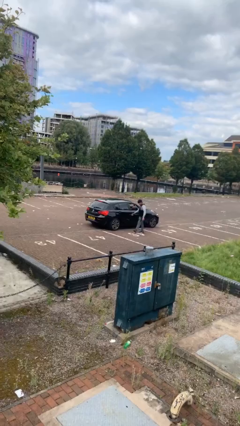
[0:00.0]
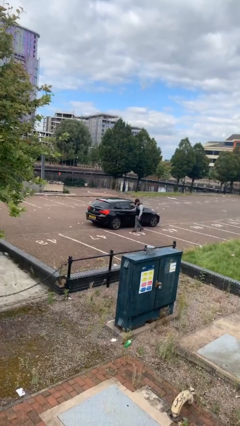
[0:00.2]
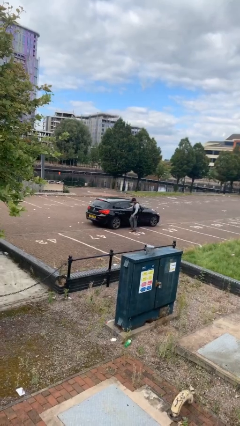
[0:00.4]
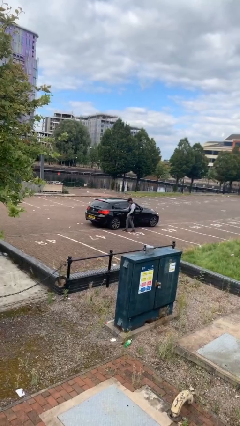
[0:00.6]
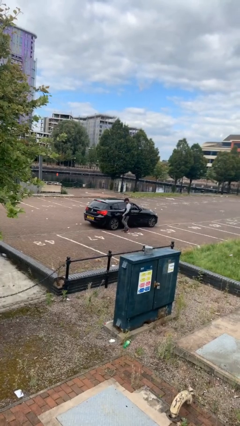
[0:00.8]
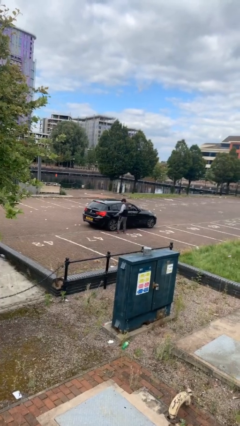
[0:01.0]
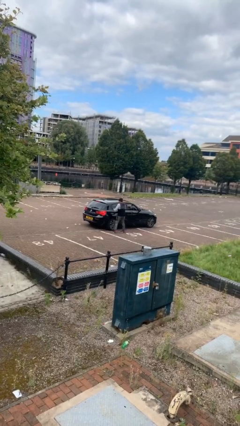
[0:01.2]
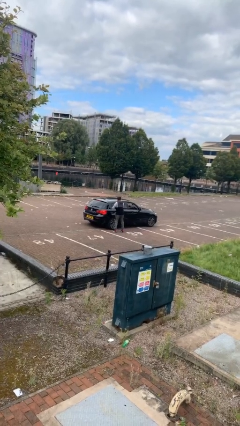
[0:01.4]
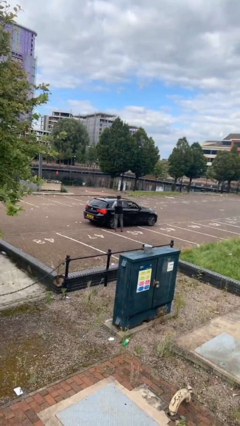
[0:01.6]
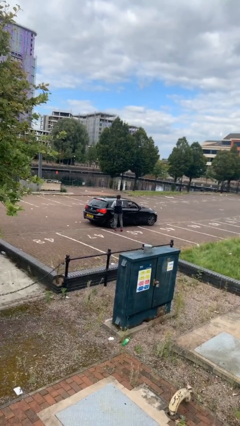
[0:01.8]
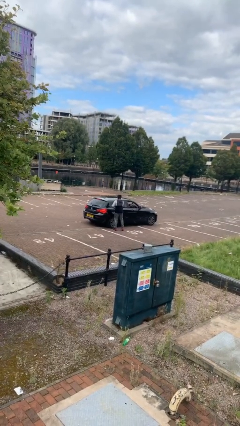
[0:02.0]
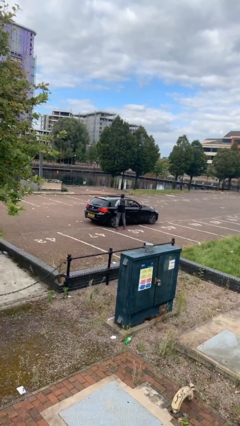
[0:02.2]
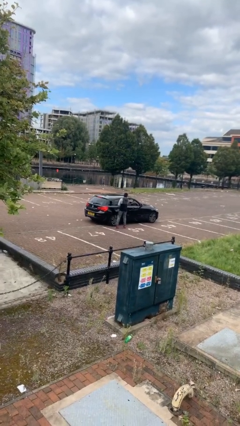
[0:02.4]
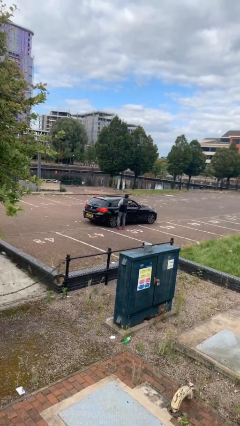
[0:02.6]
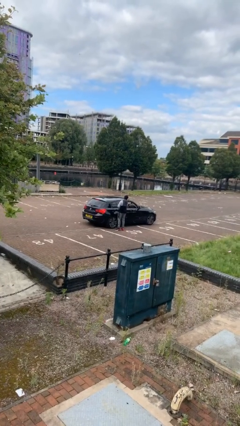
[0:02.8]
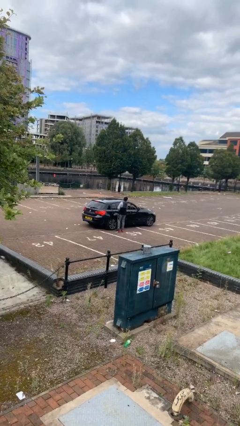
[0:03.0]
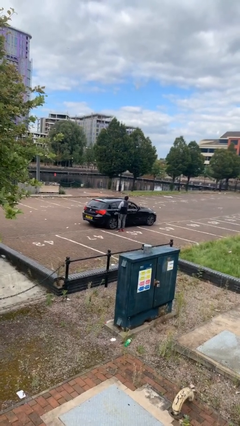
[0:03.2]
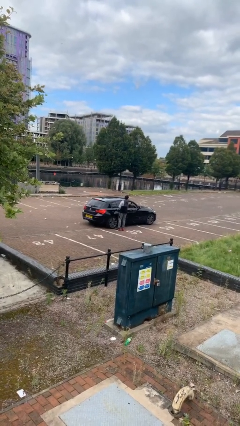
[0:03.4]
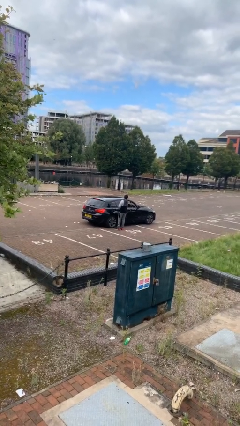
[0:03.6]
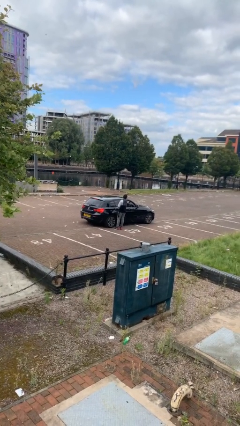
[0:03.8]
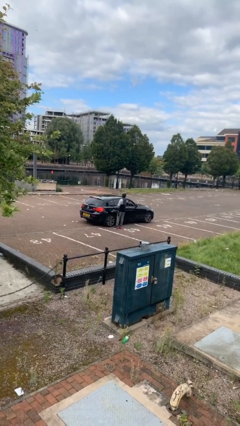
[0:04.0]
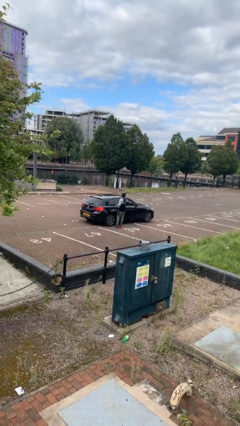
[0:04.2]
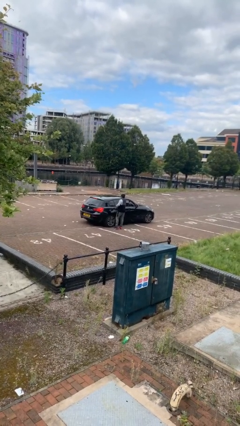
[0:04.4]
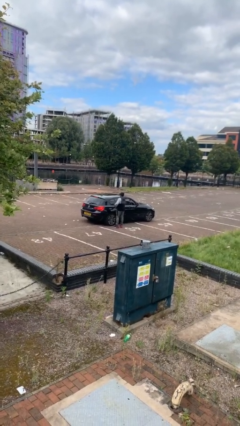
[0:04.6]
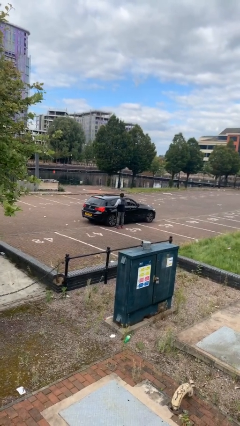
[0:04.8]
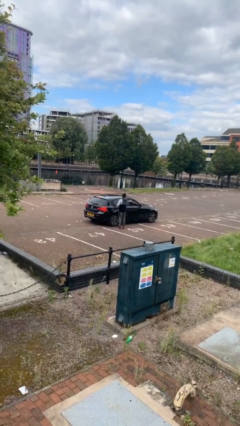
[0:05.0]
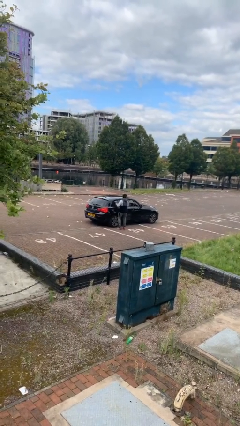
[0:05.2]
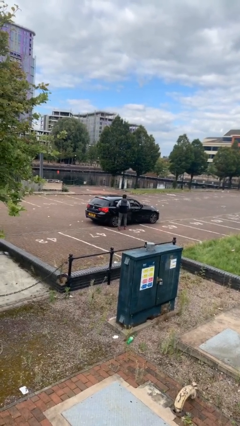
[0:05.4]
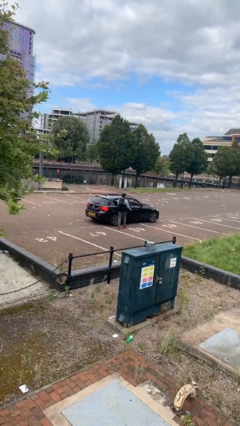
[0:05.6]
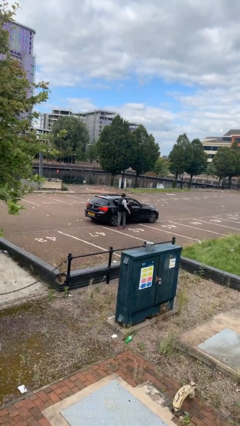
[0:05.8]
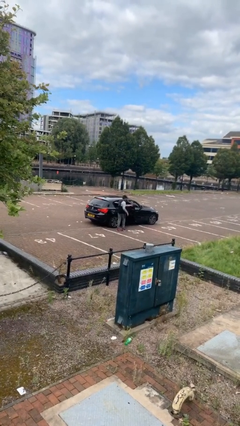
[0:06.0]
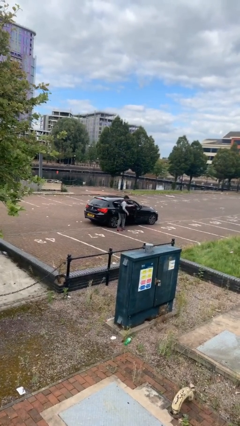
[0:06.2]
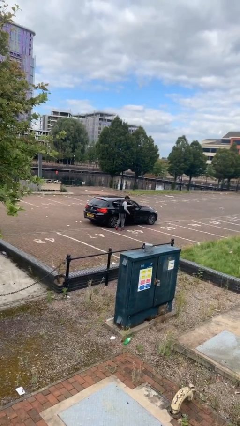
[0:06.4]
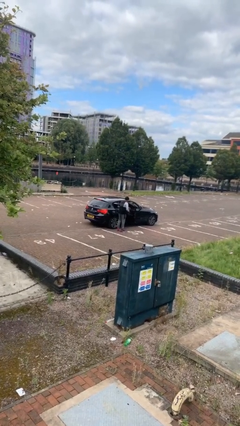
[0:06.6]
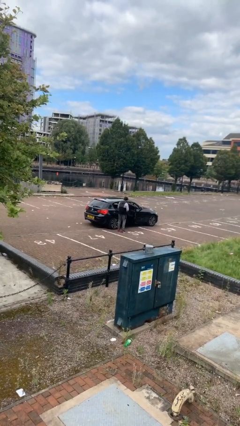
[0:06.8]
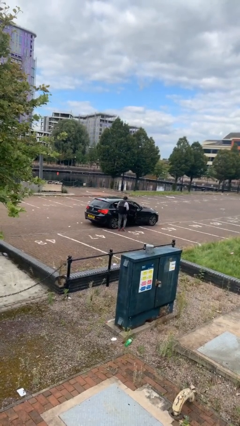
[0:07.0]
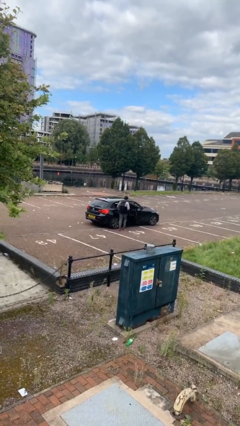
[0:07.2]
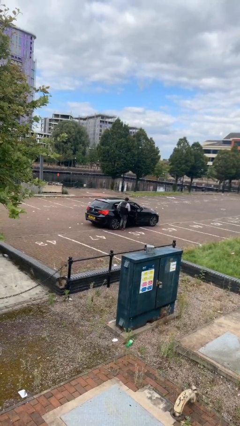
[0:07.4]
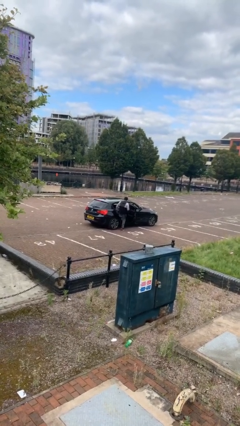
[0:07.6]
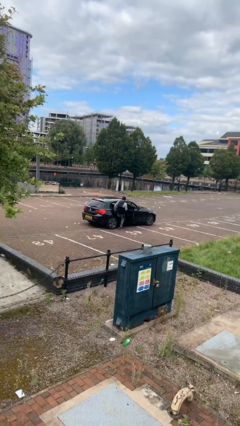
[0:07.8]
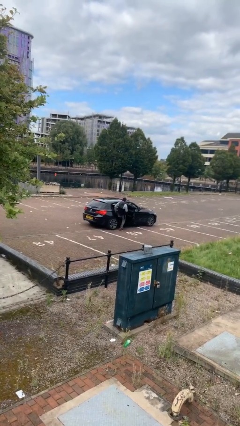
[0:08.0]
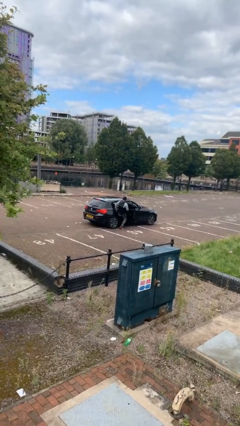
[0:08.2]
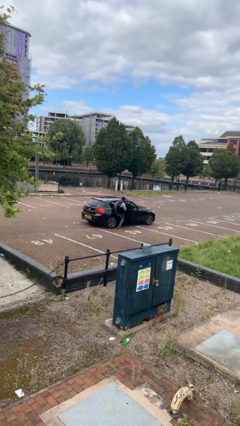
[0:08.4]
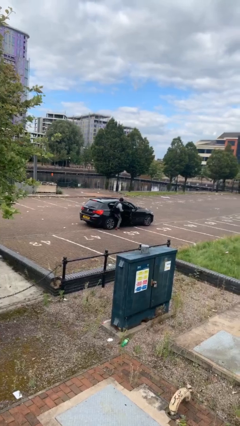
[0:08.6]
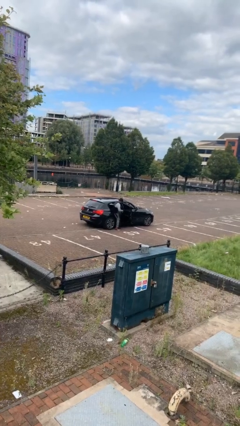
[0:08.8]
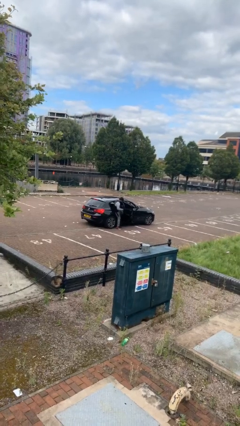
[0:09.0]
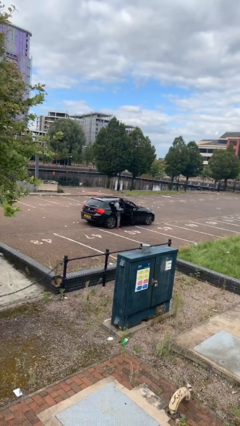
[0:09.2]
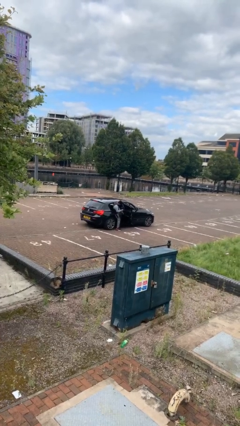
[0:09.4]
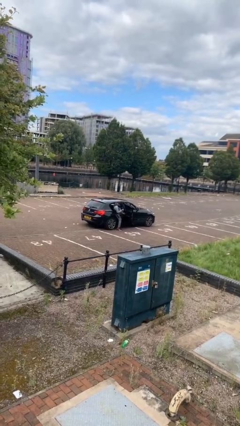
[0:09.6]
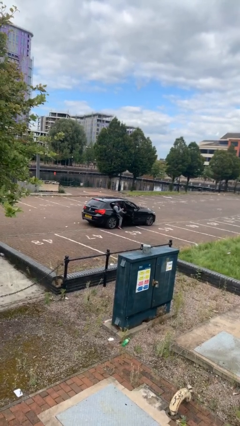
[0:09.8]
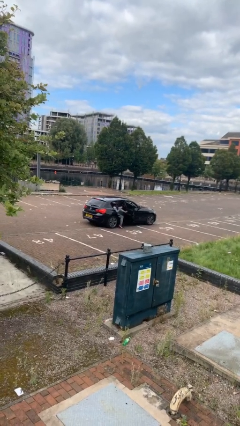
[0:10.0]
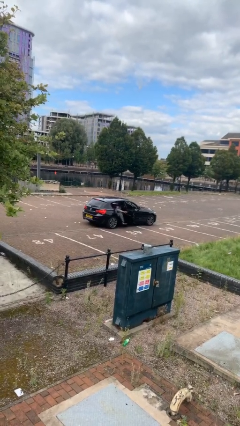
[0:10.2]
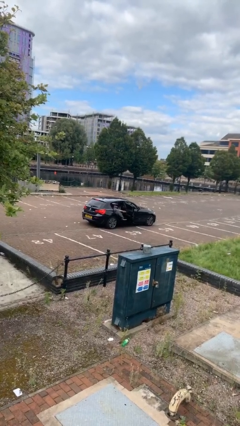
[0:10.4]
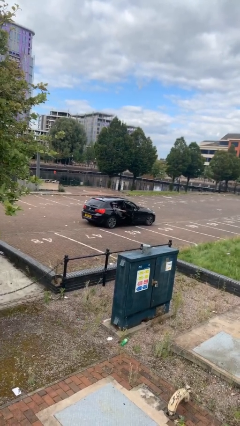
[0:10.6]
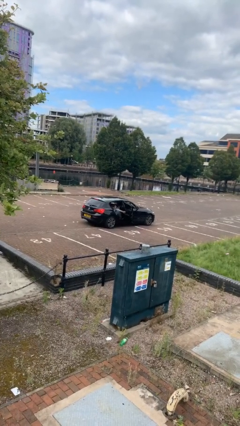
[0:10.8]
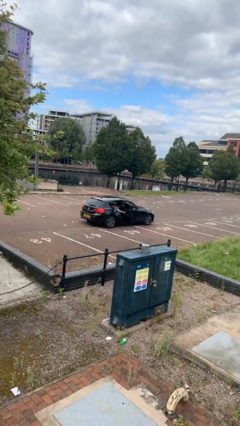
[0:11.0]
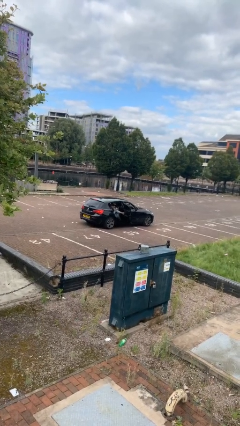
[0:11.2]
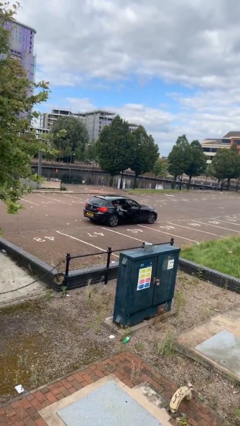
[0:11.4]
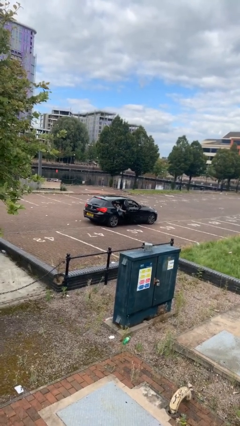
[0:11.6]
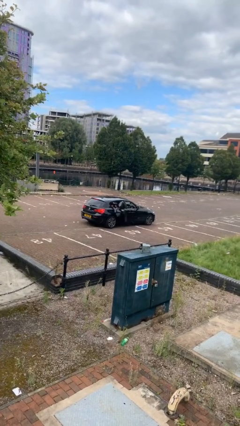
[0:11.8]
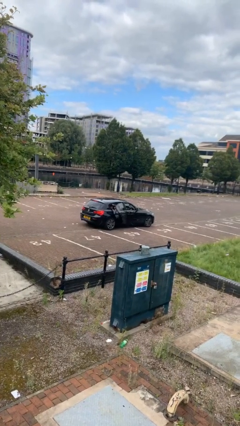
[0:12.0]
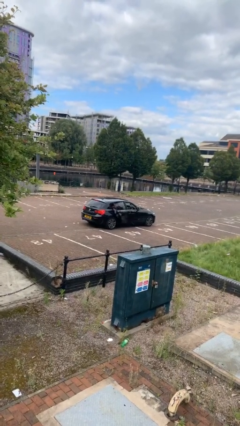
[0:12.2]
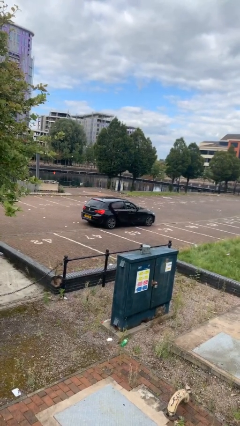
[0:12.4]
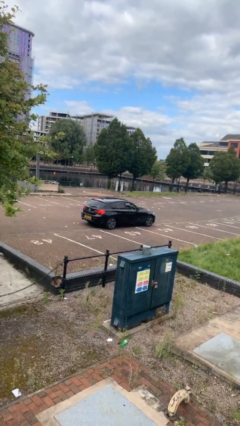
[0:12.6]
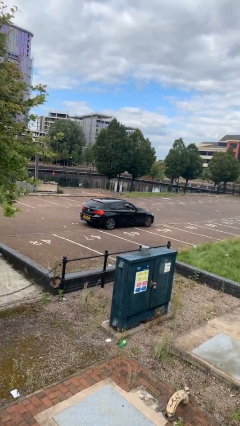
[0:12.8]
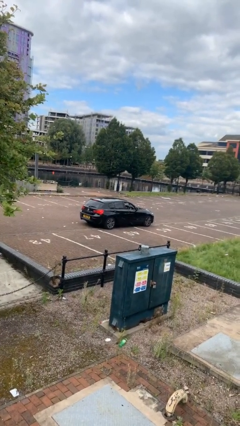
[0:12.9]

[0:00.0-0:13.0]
car picks up person

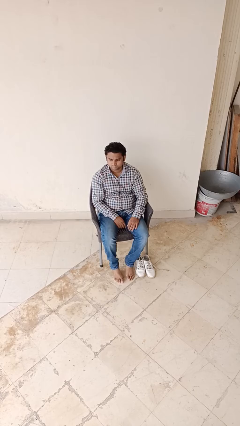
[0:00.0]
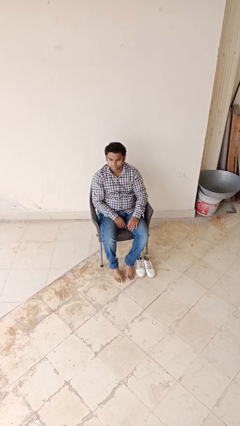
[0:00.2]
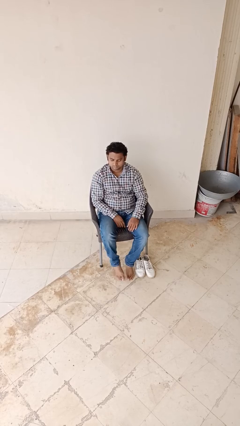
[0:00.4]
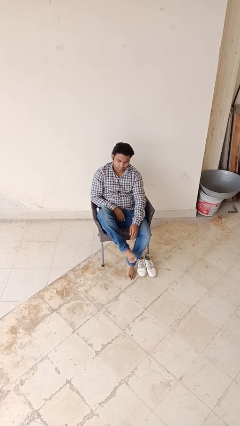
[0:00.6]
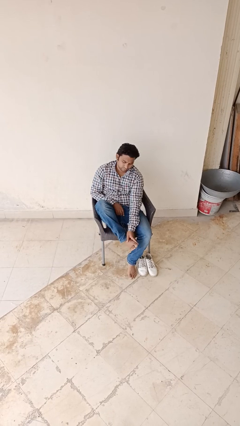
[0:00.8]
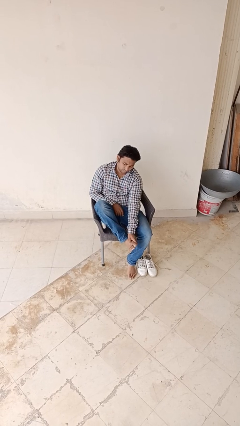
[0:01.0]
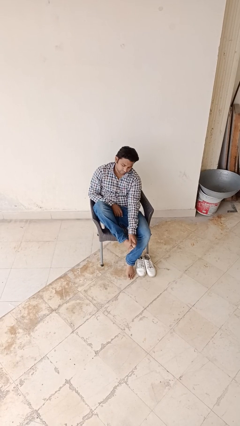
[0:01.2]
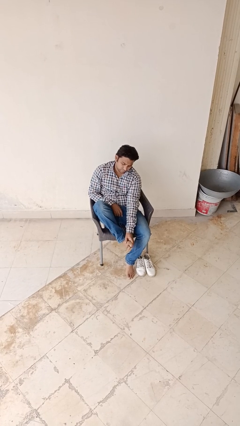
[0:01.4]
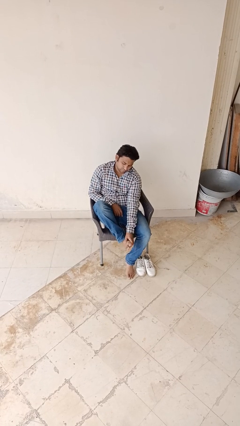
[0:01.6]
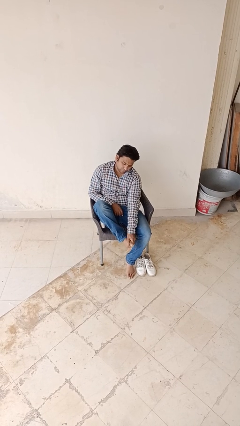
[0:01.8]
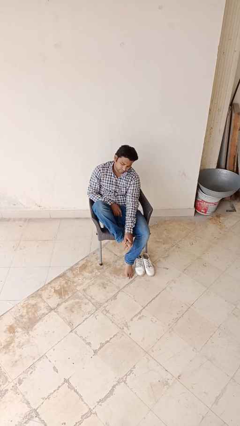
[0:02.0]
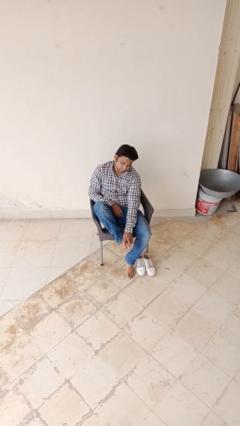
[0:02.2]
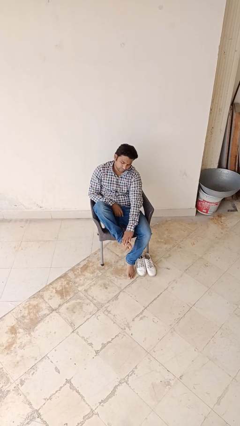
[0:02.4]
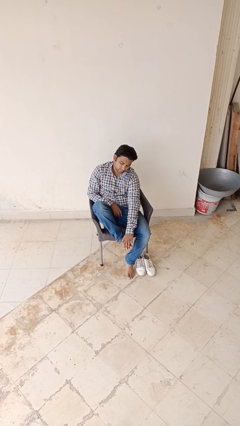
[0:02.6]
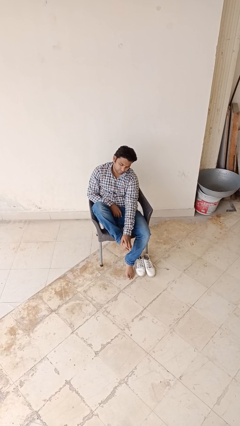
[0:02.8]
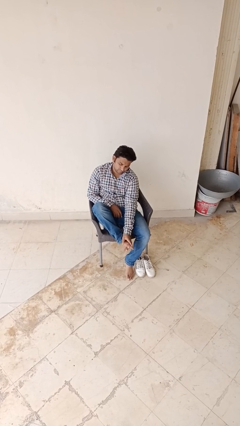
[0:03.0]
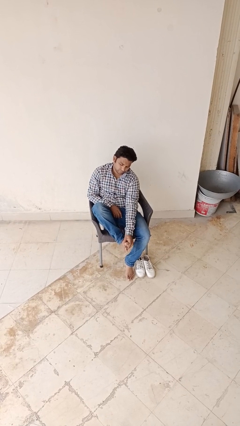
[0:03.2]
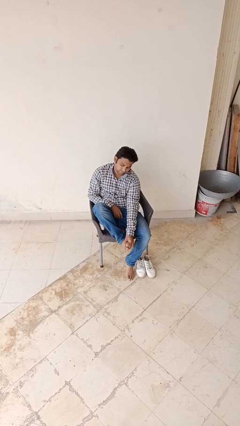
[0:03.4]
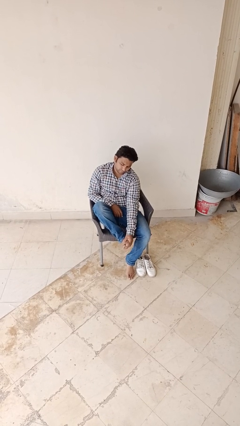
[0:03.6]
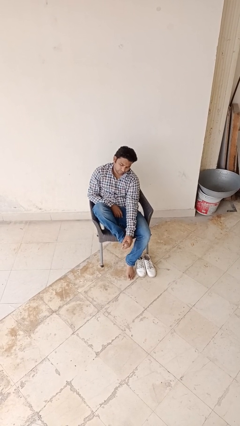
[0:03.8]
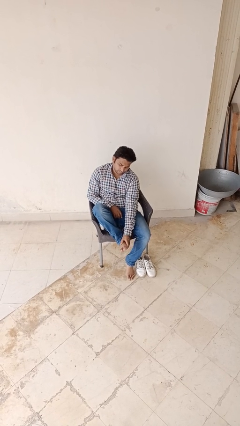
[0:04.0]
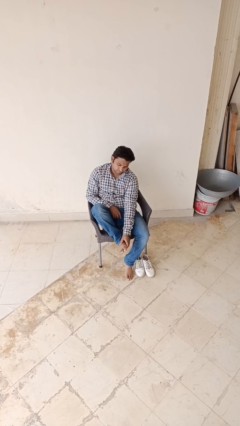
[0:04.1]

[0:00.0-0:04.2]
person rubs foot

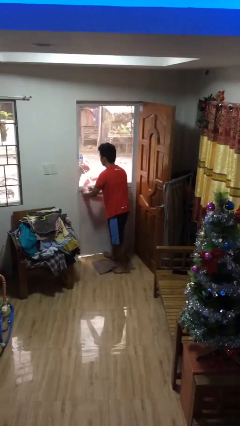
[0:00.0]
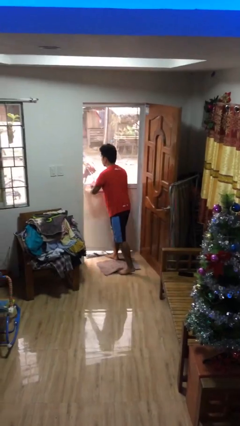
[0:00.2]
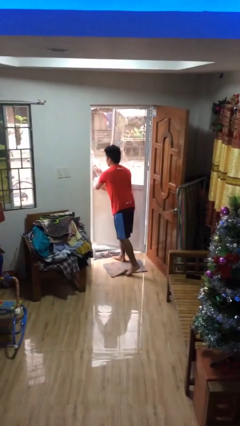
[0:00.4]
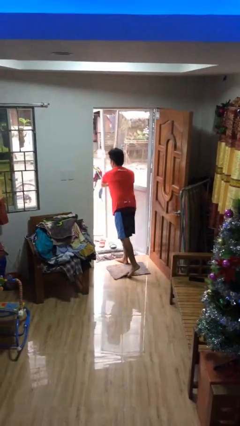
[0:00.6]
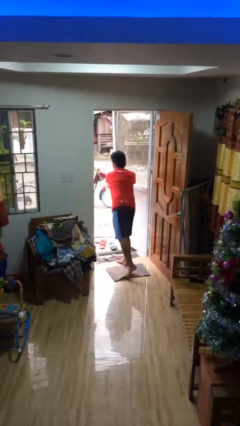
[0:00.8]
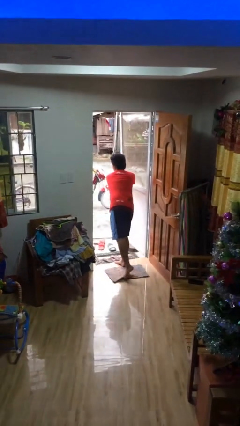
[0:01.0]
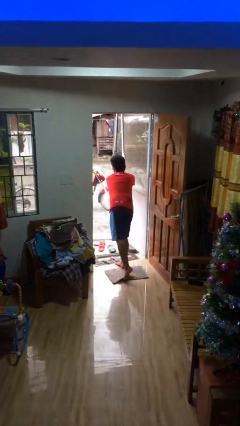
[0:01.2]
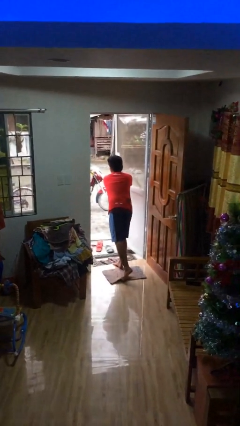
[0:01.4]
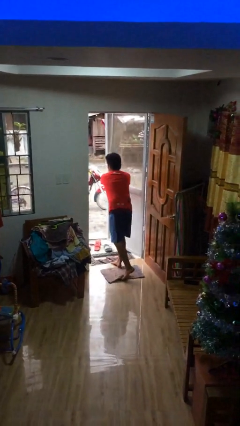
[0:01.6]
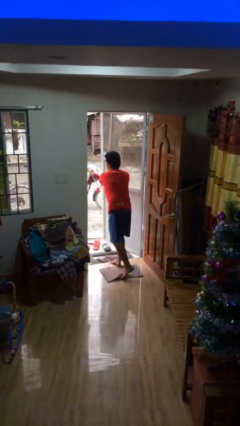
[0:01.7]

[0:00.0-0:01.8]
person opens facility door
